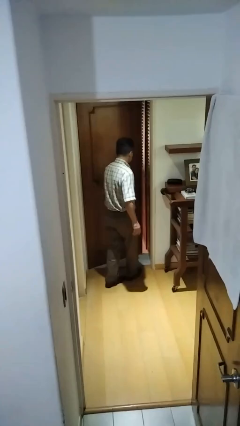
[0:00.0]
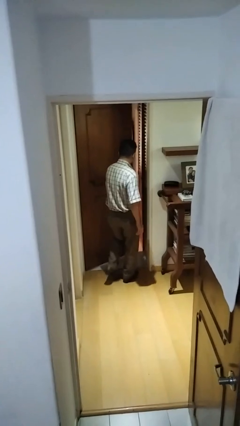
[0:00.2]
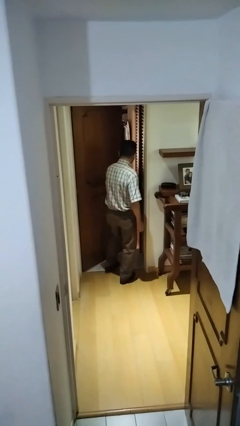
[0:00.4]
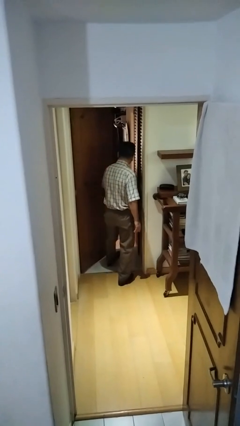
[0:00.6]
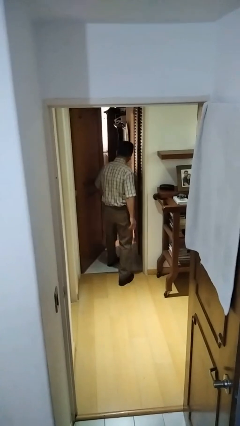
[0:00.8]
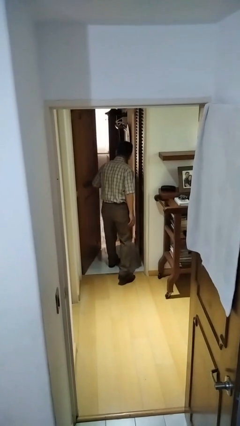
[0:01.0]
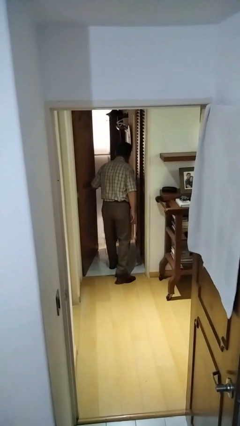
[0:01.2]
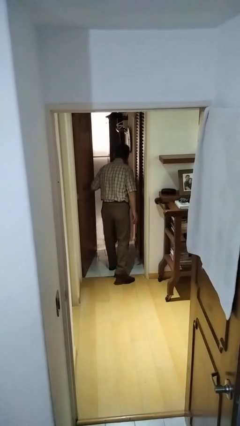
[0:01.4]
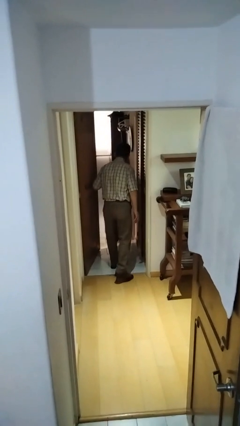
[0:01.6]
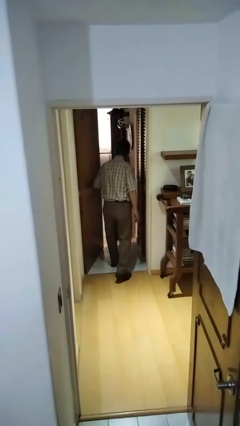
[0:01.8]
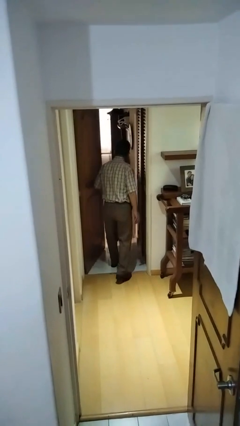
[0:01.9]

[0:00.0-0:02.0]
person opens facility door

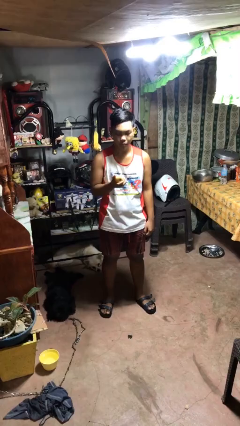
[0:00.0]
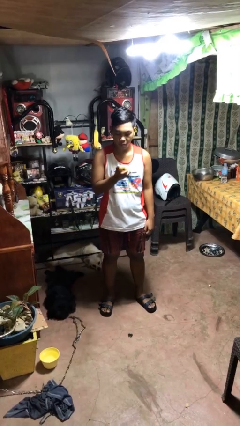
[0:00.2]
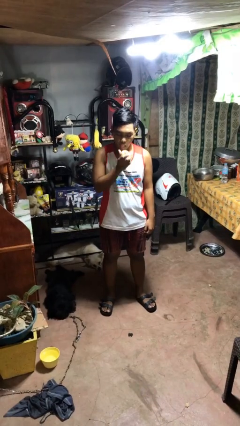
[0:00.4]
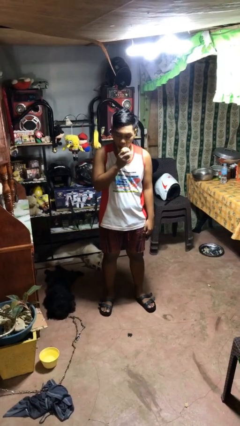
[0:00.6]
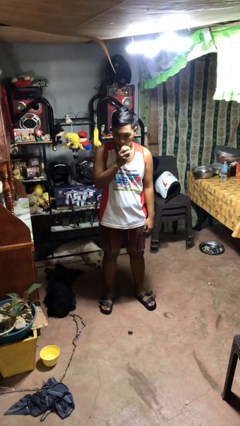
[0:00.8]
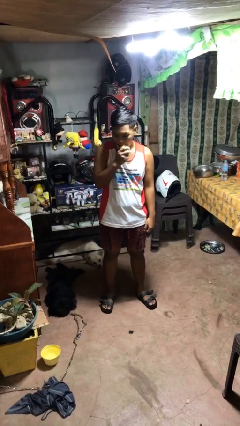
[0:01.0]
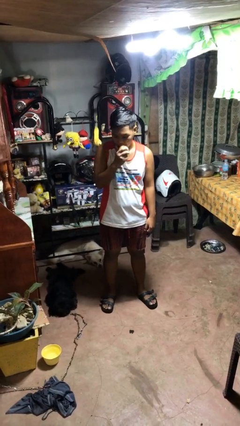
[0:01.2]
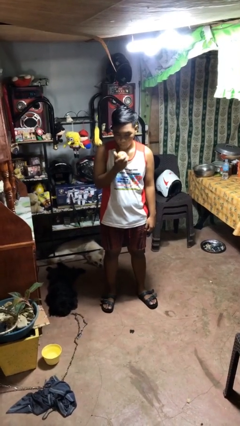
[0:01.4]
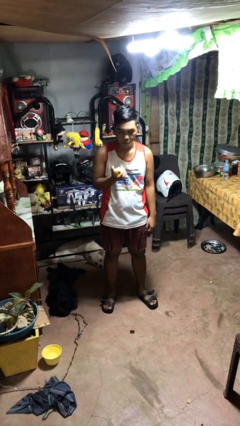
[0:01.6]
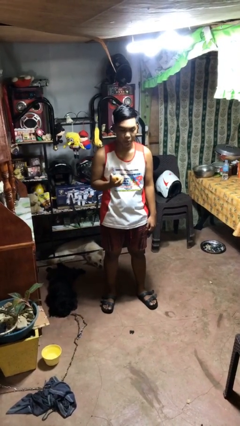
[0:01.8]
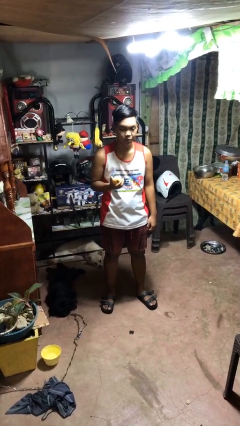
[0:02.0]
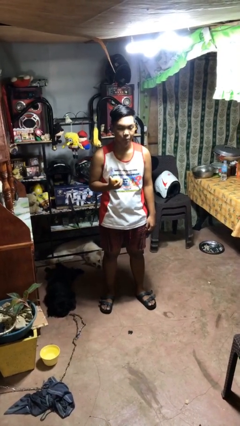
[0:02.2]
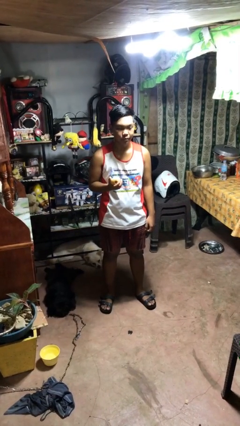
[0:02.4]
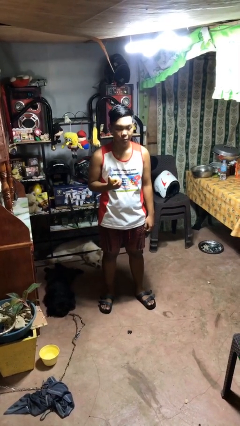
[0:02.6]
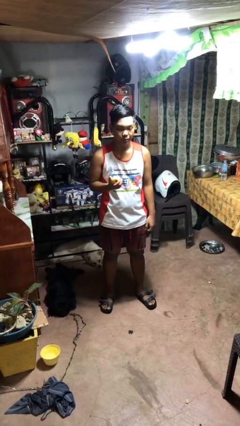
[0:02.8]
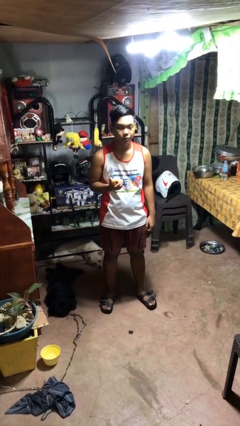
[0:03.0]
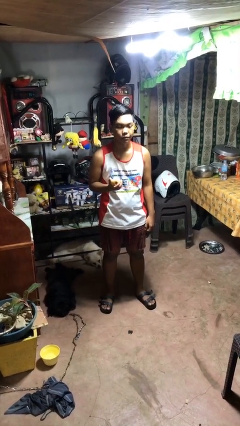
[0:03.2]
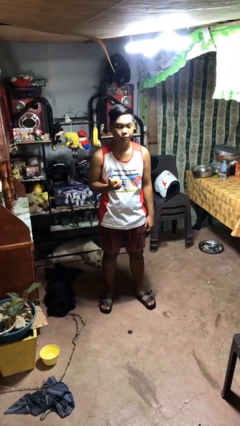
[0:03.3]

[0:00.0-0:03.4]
person eats apple

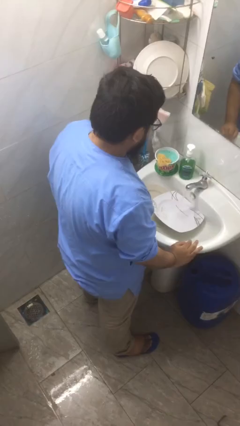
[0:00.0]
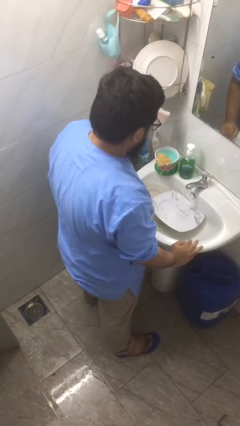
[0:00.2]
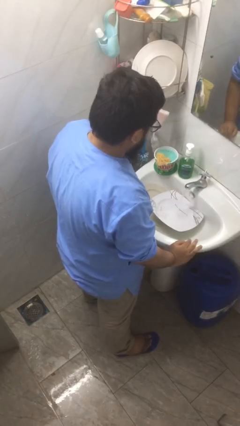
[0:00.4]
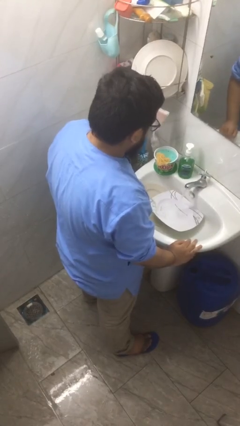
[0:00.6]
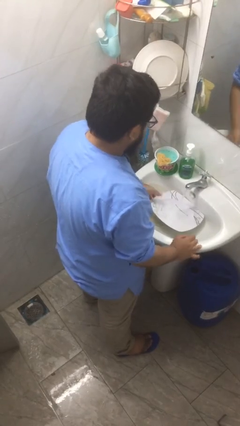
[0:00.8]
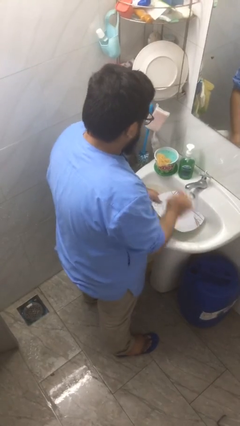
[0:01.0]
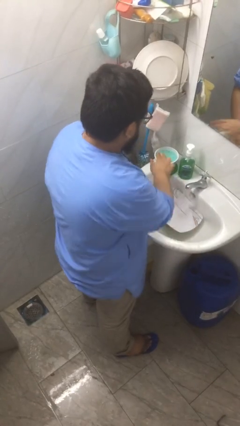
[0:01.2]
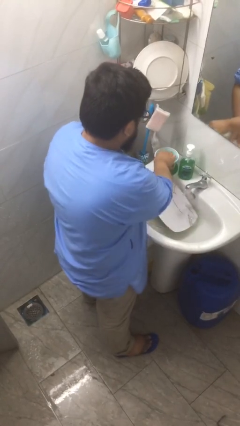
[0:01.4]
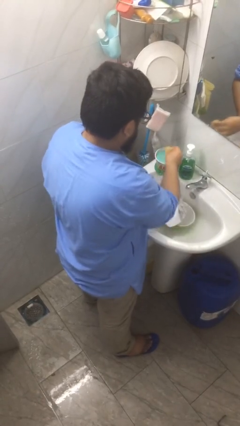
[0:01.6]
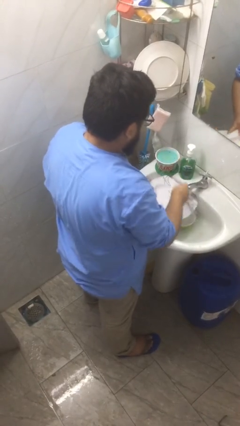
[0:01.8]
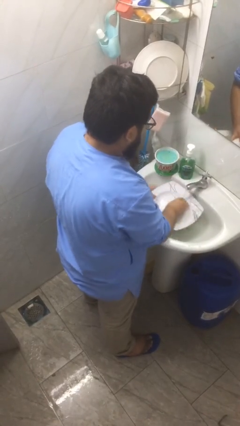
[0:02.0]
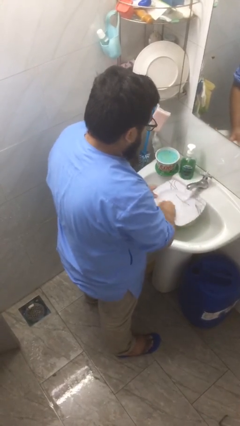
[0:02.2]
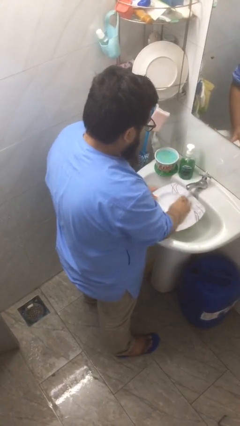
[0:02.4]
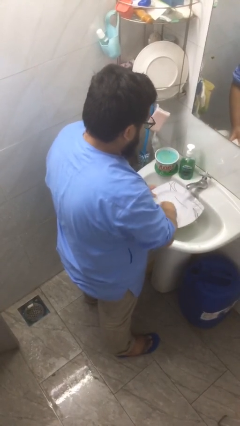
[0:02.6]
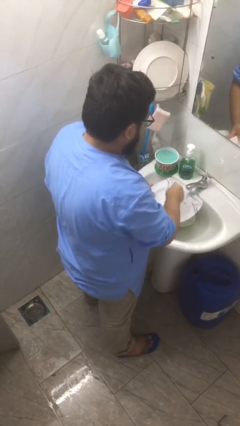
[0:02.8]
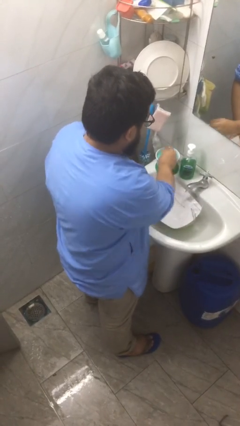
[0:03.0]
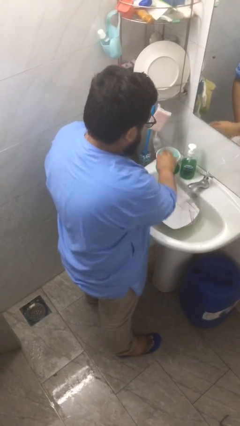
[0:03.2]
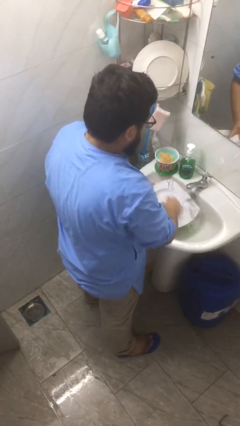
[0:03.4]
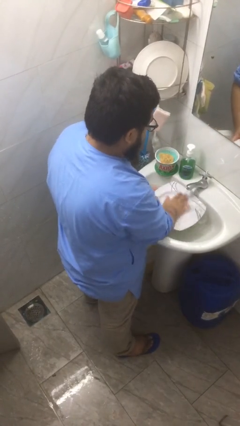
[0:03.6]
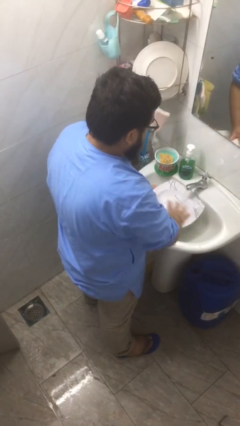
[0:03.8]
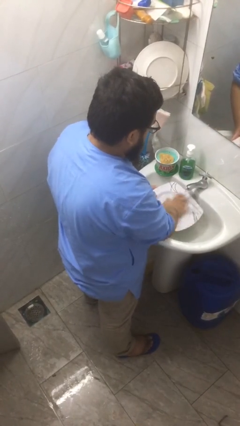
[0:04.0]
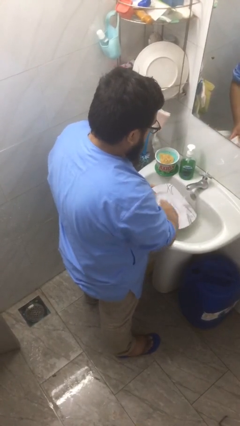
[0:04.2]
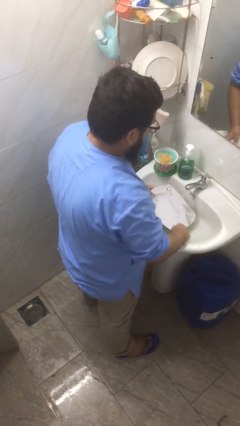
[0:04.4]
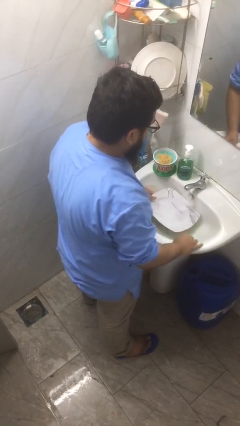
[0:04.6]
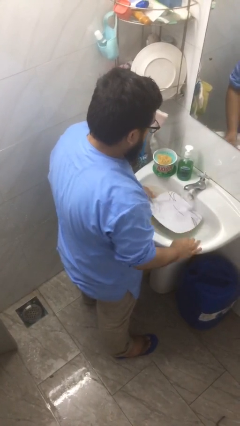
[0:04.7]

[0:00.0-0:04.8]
person washes dish

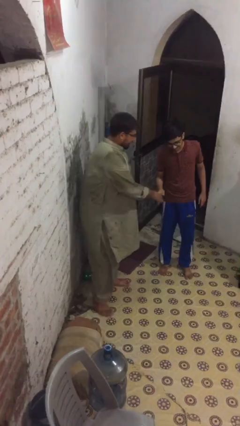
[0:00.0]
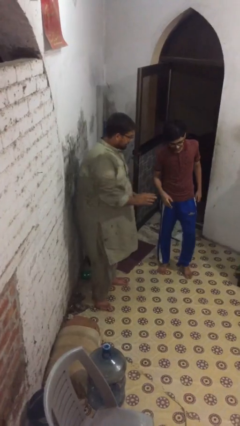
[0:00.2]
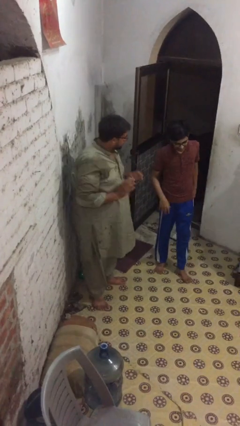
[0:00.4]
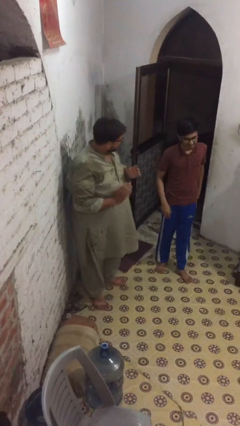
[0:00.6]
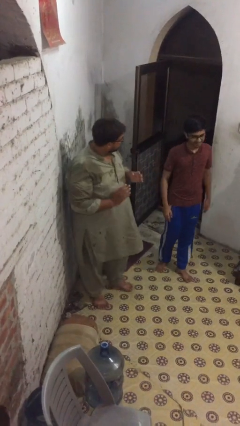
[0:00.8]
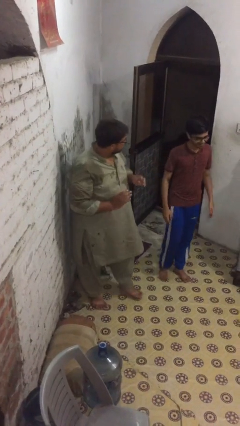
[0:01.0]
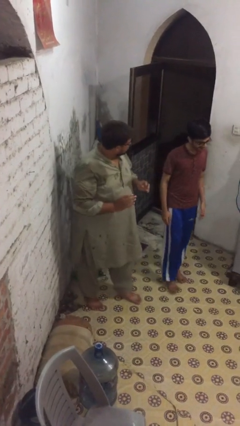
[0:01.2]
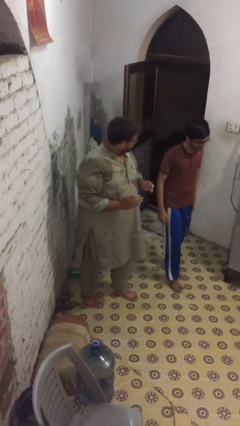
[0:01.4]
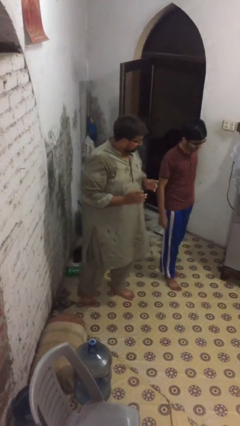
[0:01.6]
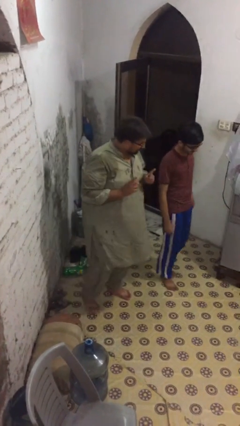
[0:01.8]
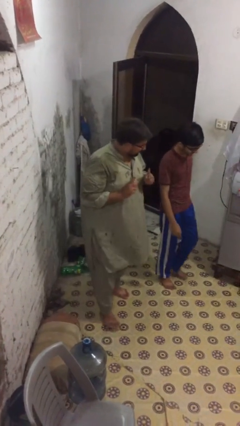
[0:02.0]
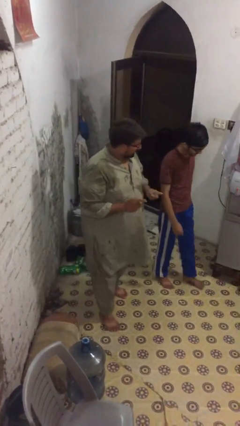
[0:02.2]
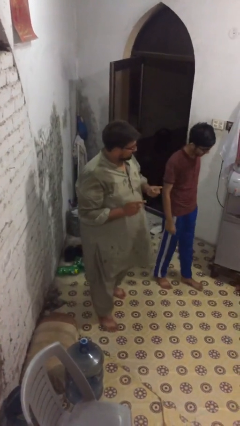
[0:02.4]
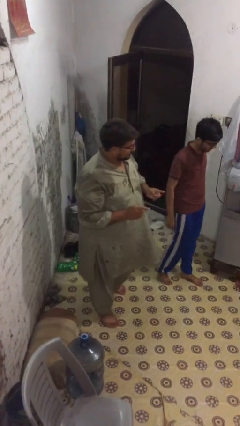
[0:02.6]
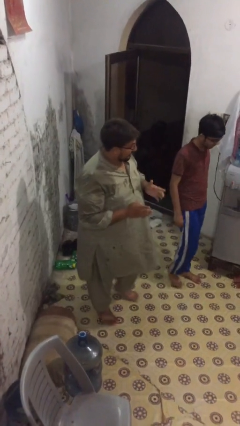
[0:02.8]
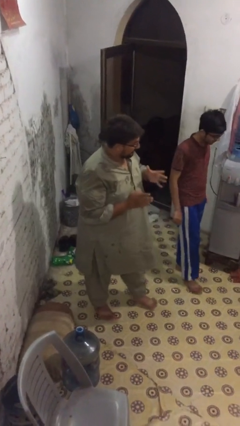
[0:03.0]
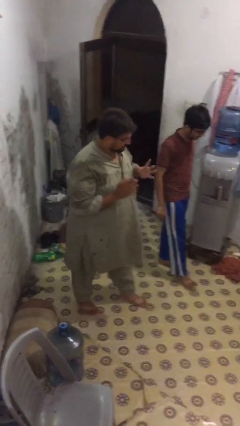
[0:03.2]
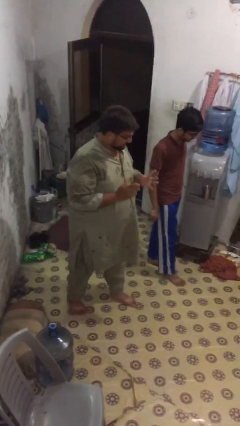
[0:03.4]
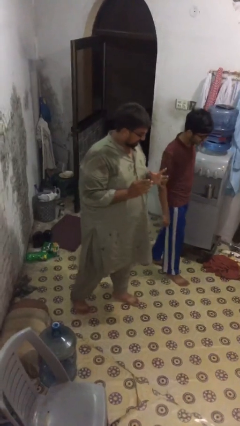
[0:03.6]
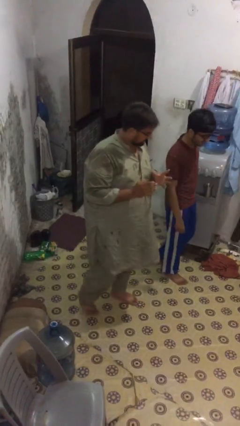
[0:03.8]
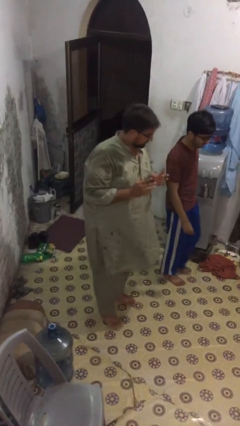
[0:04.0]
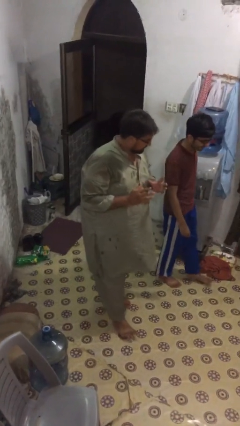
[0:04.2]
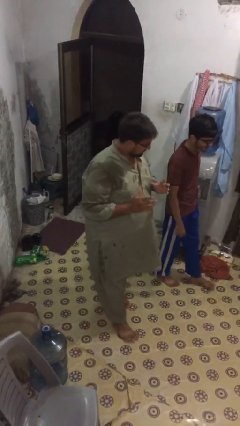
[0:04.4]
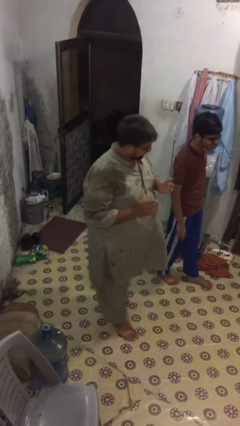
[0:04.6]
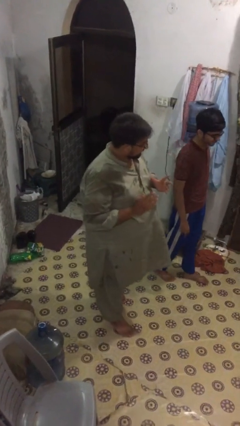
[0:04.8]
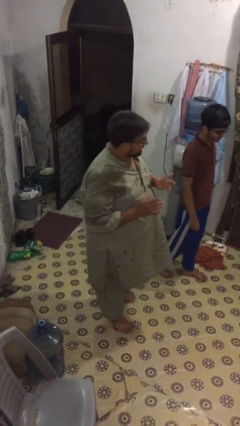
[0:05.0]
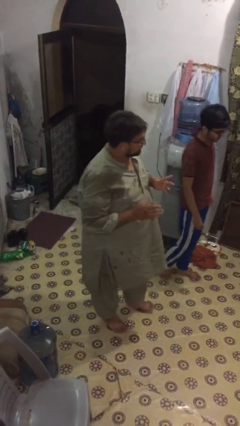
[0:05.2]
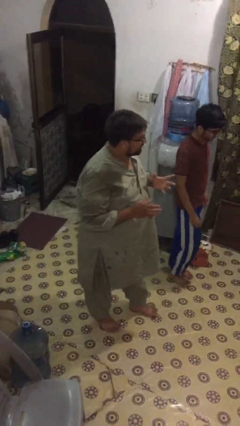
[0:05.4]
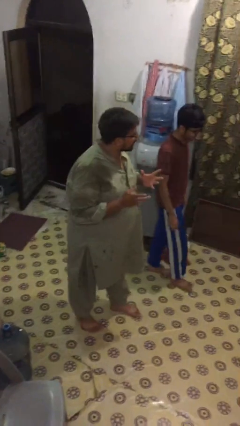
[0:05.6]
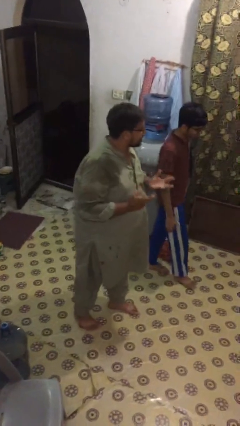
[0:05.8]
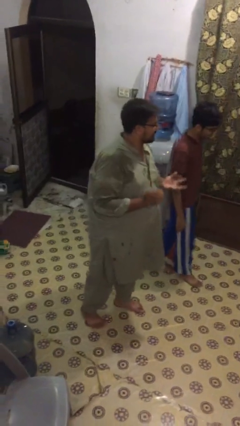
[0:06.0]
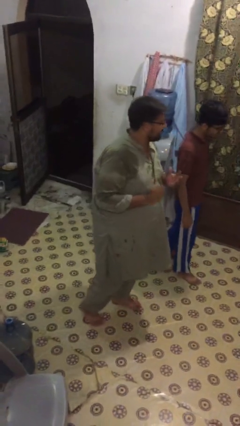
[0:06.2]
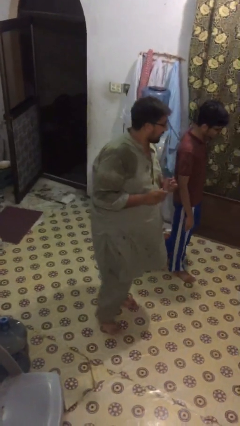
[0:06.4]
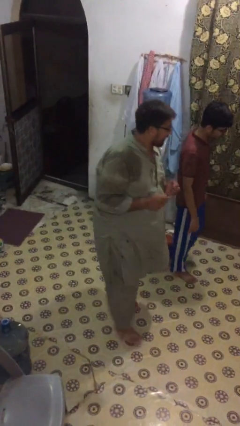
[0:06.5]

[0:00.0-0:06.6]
person talks to person

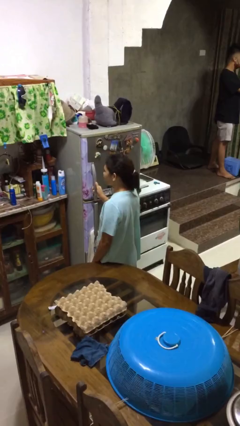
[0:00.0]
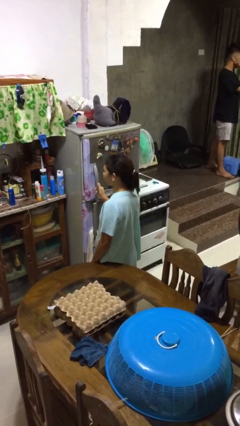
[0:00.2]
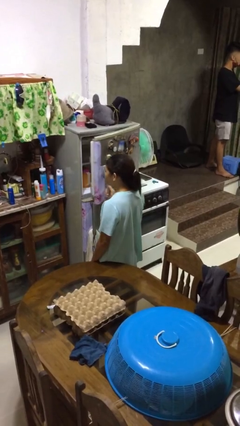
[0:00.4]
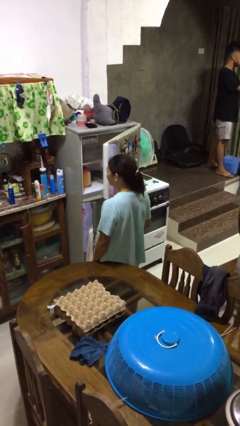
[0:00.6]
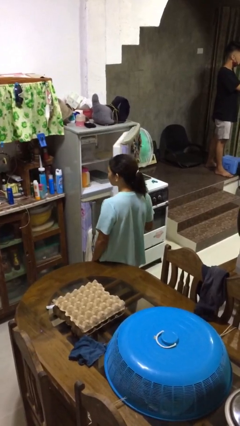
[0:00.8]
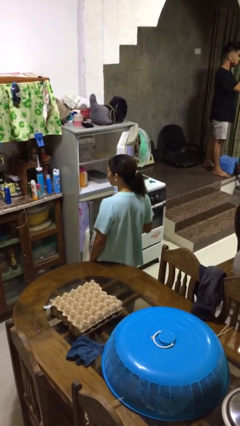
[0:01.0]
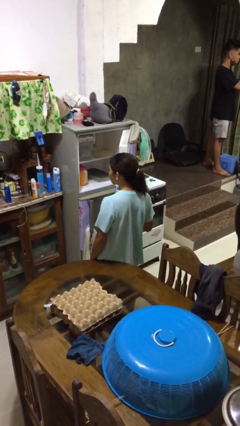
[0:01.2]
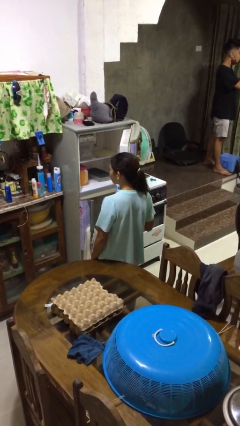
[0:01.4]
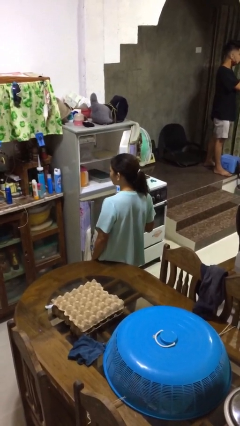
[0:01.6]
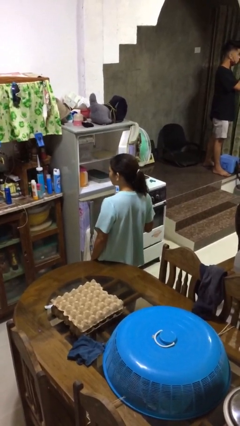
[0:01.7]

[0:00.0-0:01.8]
person opens refrigerator
